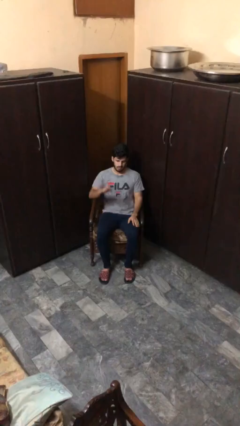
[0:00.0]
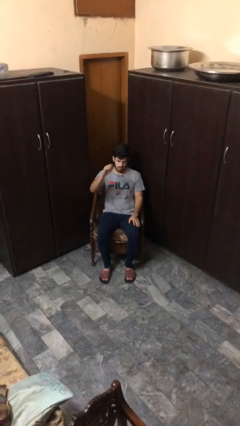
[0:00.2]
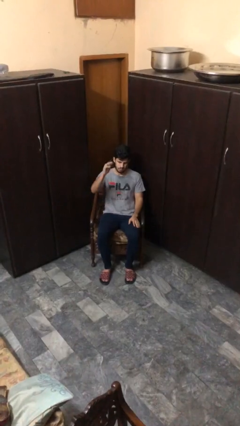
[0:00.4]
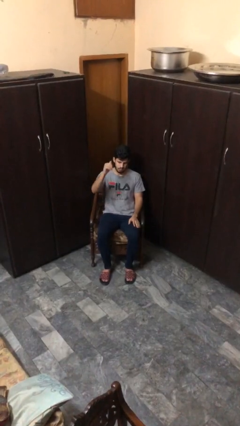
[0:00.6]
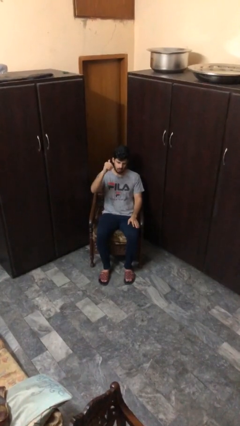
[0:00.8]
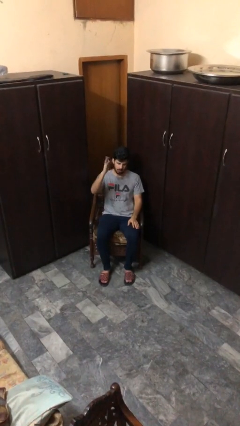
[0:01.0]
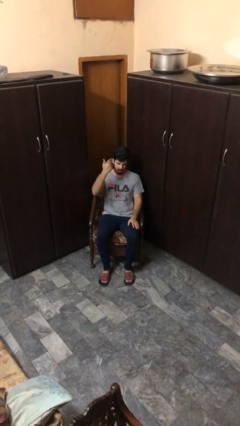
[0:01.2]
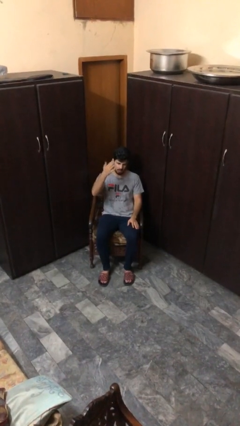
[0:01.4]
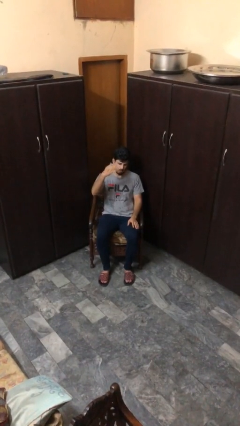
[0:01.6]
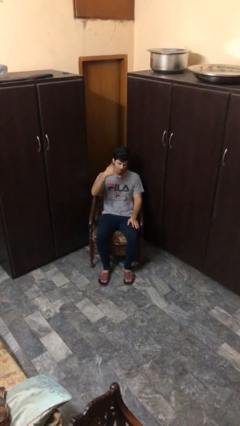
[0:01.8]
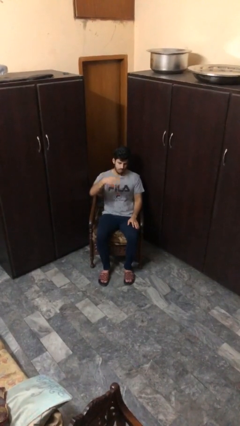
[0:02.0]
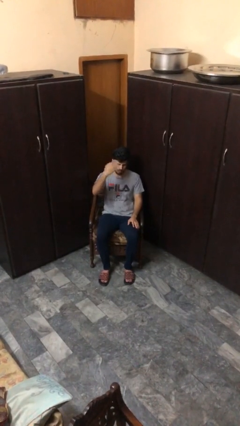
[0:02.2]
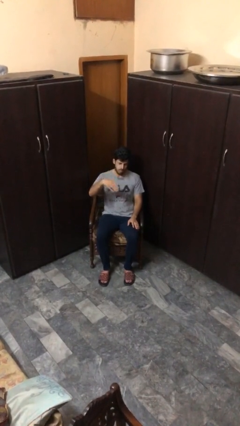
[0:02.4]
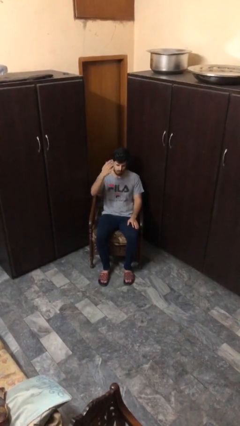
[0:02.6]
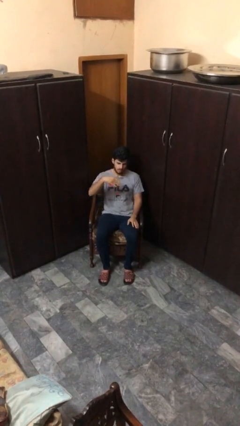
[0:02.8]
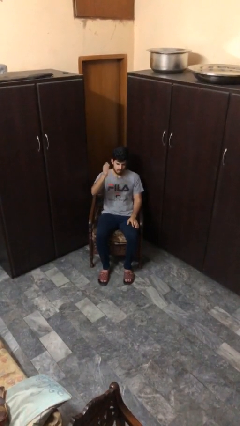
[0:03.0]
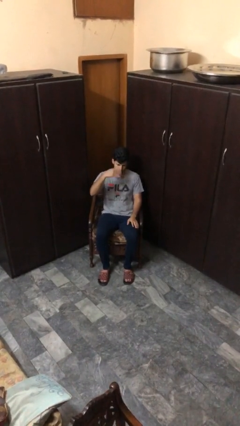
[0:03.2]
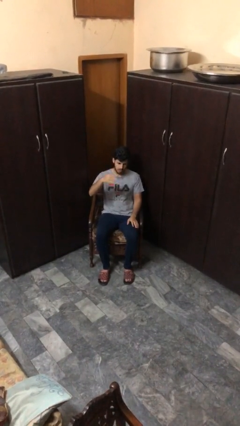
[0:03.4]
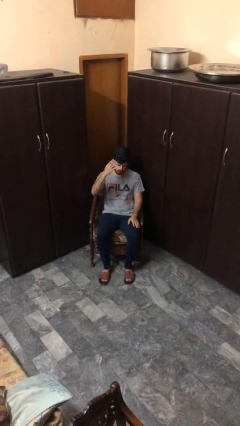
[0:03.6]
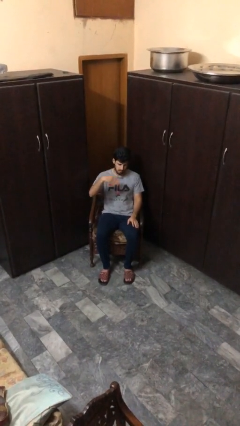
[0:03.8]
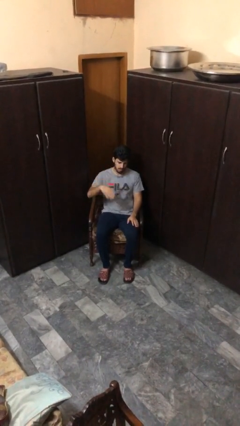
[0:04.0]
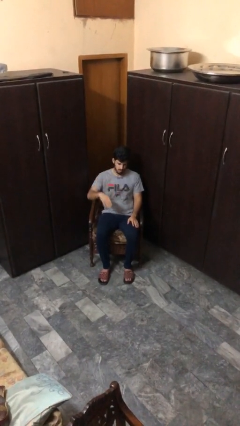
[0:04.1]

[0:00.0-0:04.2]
person gestures come here

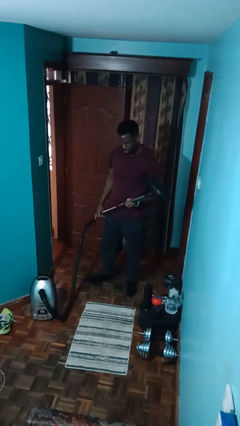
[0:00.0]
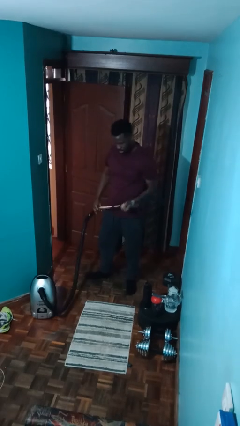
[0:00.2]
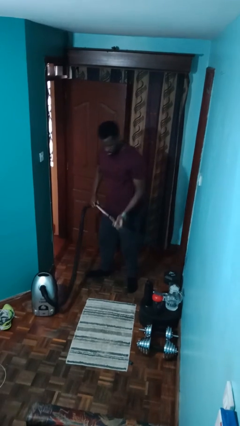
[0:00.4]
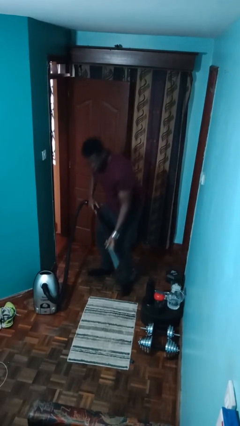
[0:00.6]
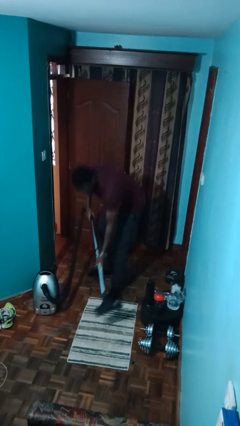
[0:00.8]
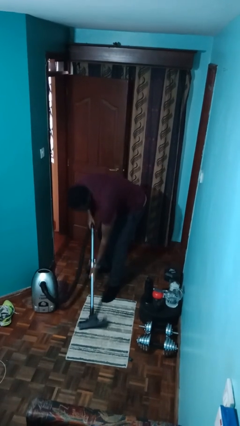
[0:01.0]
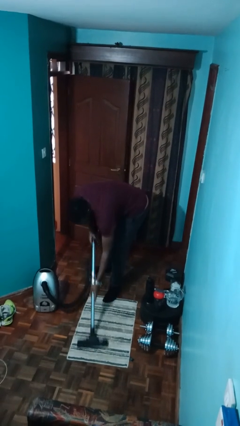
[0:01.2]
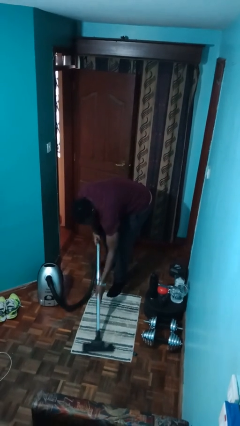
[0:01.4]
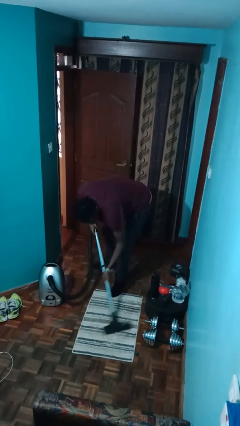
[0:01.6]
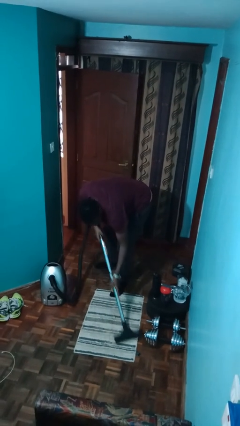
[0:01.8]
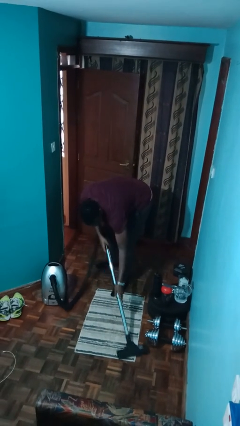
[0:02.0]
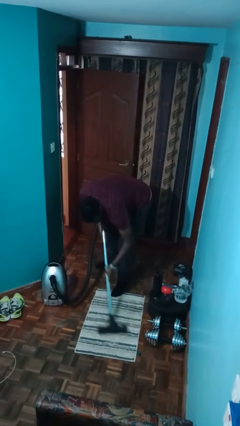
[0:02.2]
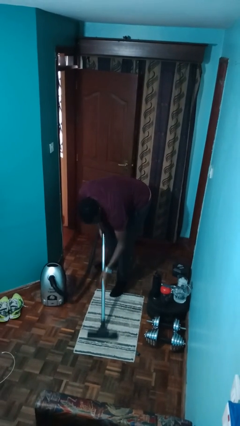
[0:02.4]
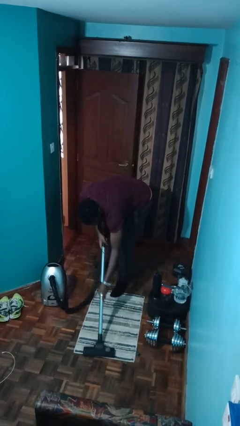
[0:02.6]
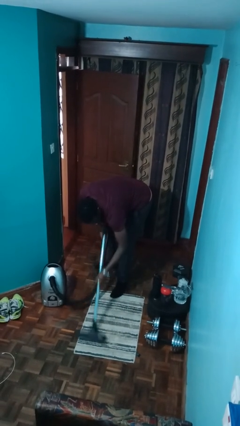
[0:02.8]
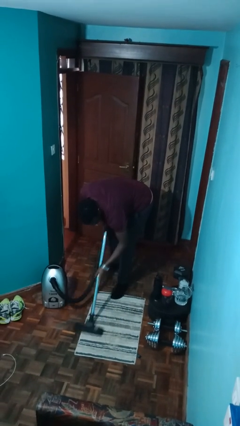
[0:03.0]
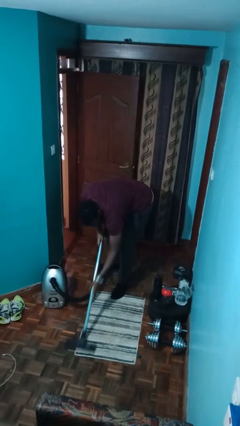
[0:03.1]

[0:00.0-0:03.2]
person vacuums carpet

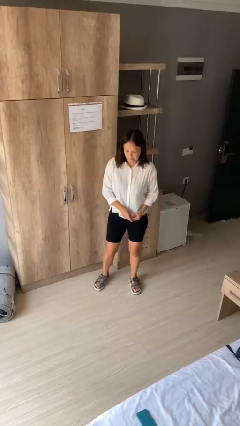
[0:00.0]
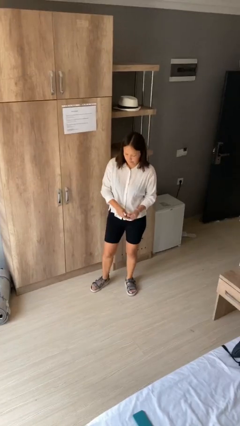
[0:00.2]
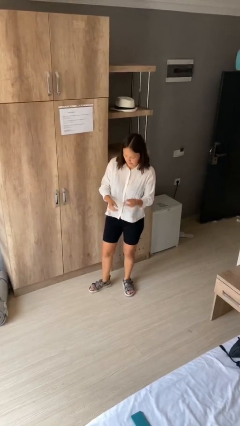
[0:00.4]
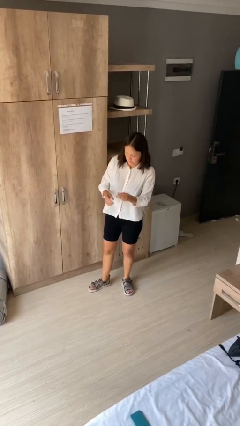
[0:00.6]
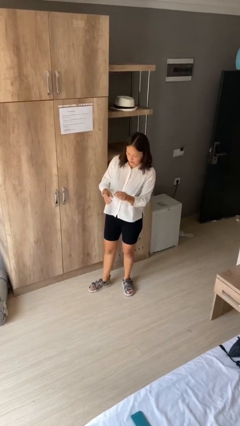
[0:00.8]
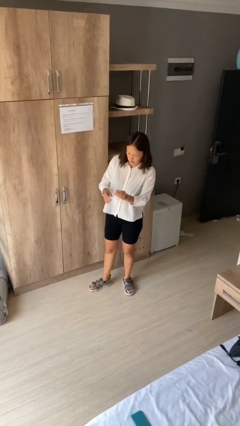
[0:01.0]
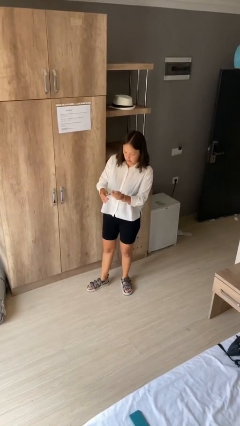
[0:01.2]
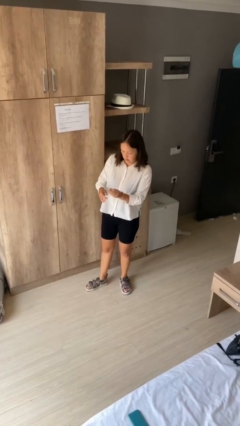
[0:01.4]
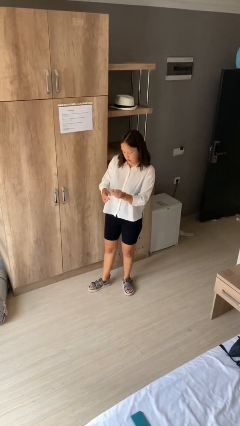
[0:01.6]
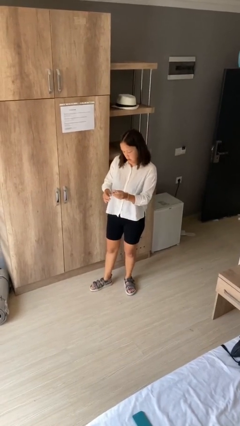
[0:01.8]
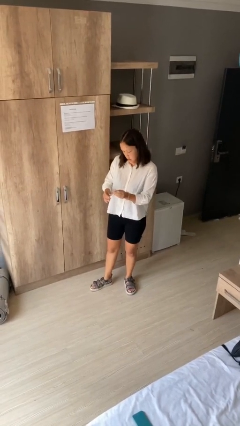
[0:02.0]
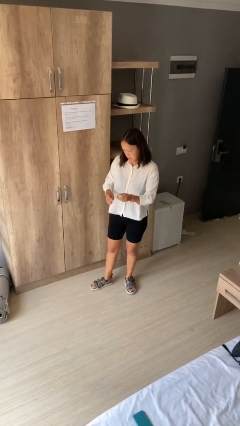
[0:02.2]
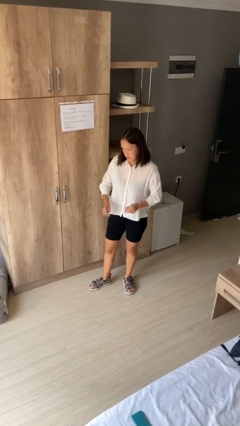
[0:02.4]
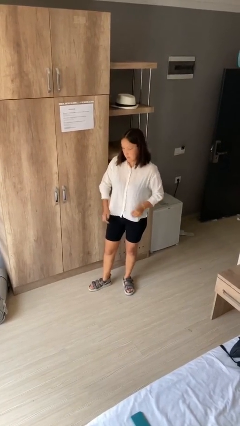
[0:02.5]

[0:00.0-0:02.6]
person clips fingernails

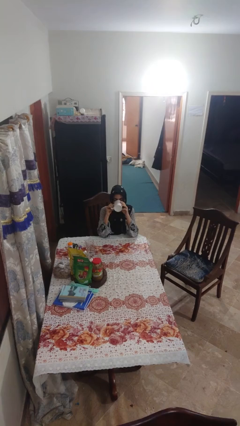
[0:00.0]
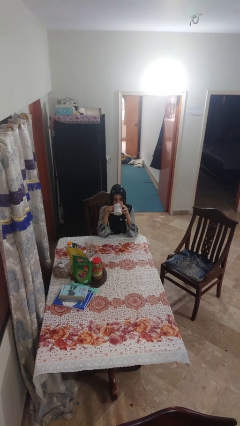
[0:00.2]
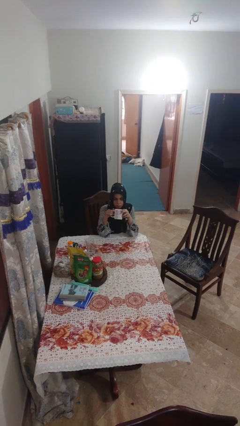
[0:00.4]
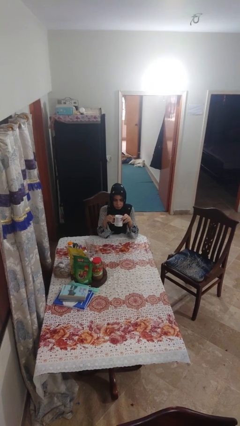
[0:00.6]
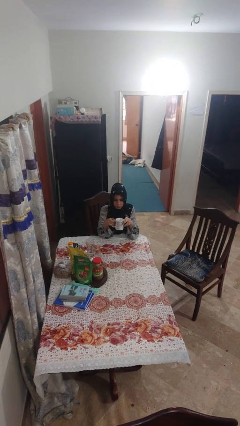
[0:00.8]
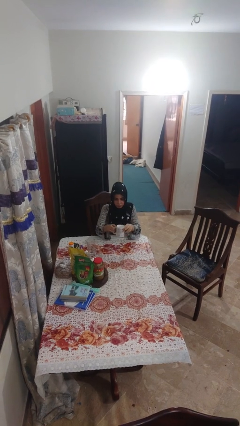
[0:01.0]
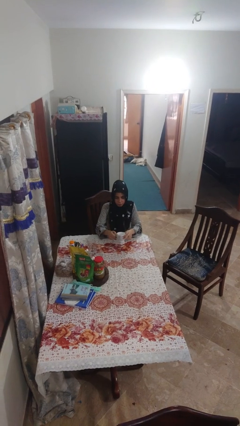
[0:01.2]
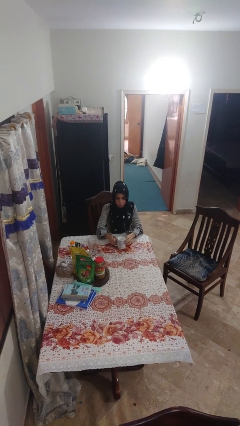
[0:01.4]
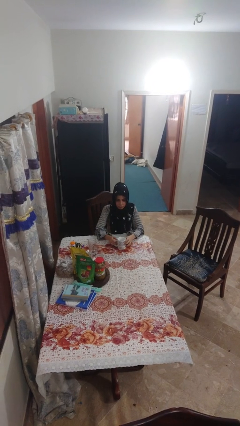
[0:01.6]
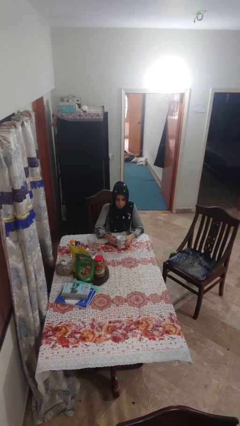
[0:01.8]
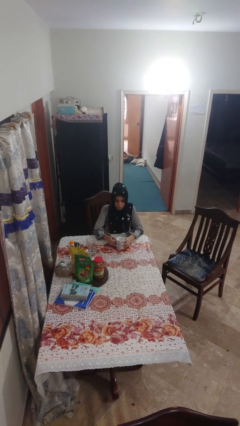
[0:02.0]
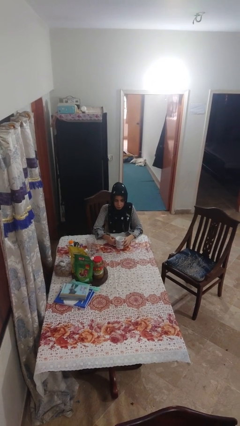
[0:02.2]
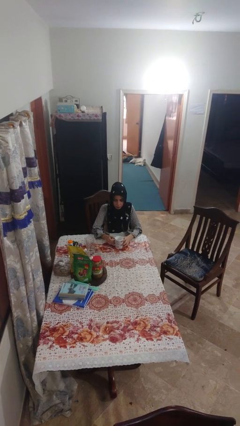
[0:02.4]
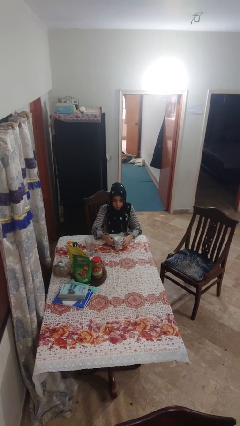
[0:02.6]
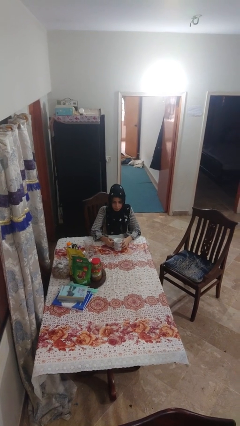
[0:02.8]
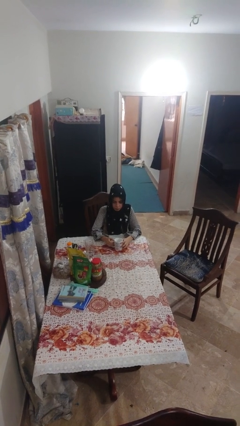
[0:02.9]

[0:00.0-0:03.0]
person puts down object on table

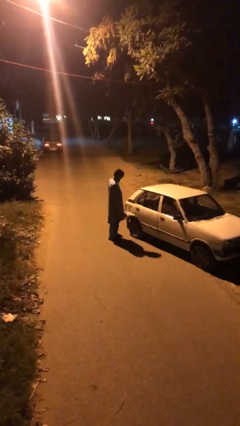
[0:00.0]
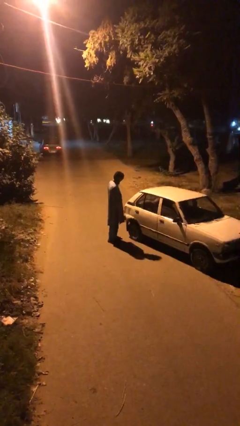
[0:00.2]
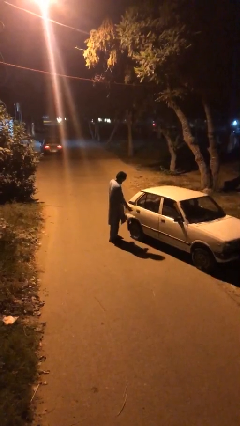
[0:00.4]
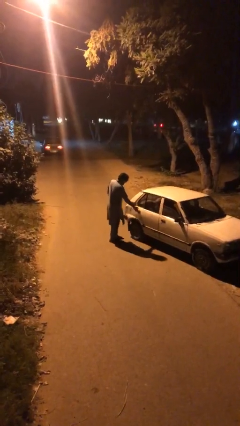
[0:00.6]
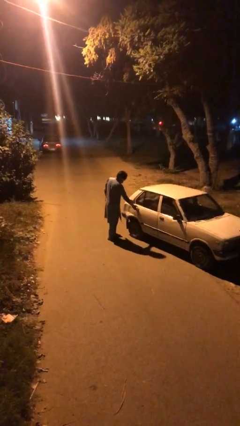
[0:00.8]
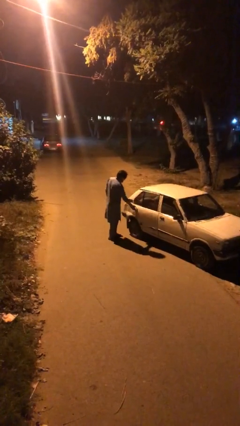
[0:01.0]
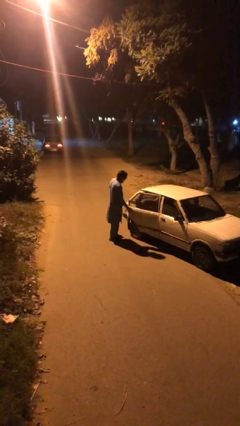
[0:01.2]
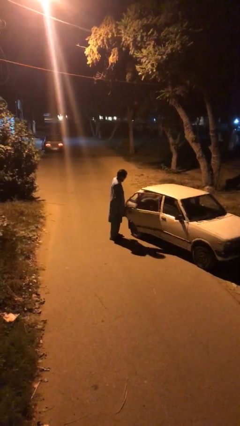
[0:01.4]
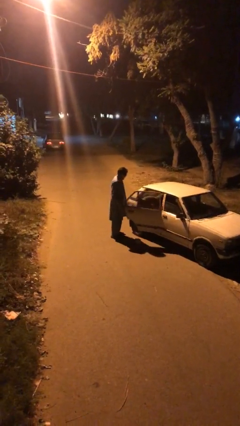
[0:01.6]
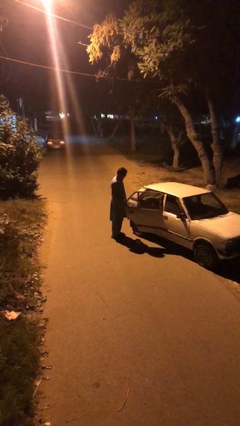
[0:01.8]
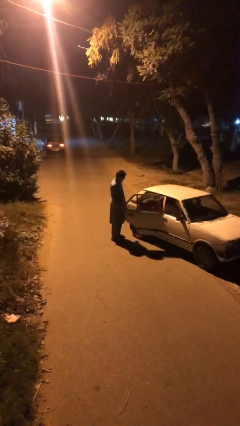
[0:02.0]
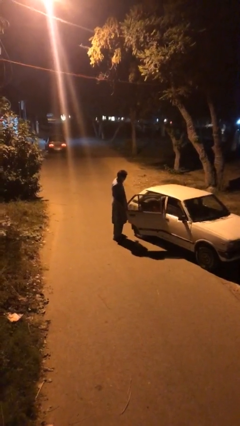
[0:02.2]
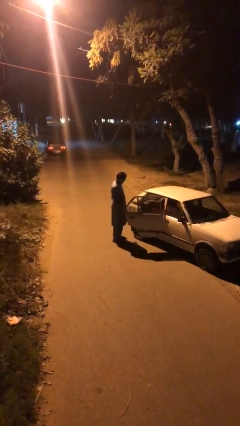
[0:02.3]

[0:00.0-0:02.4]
person opens car door

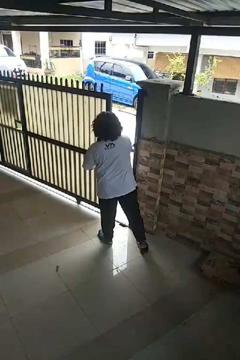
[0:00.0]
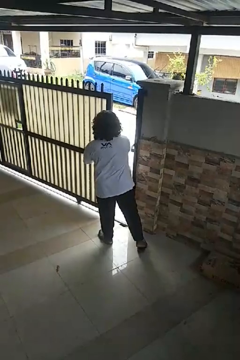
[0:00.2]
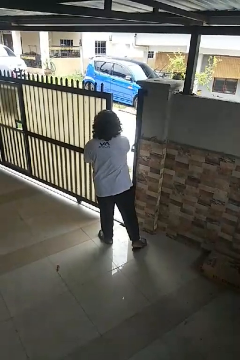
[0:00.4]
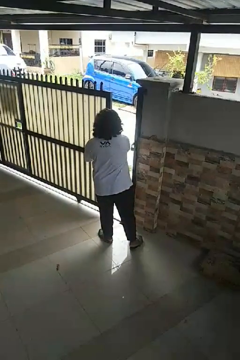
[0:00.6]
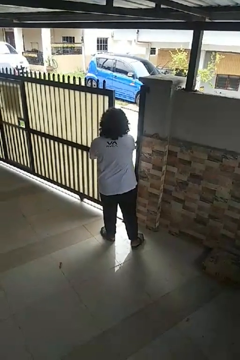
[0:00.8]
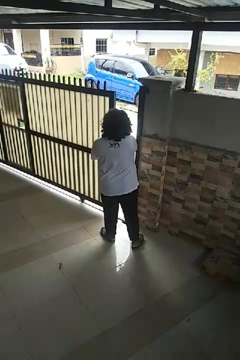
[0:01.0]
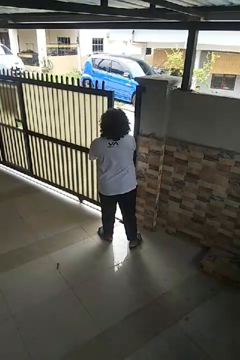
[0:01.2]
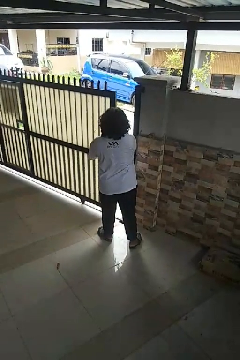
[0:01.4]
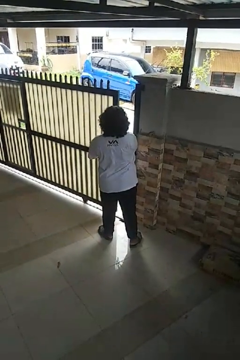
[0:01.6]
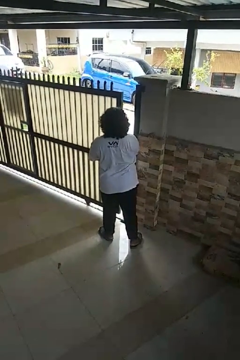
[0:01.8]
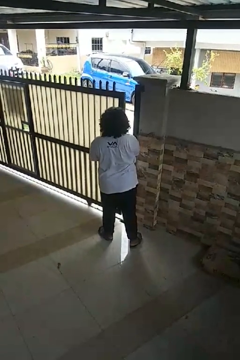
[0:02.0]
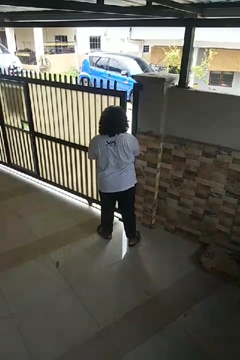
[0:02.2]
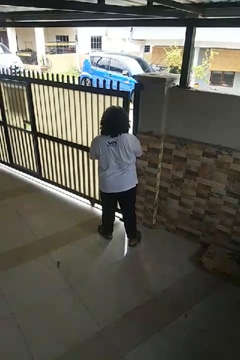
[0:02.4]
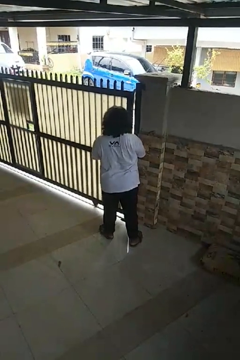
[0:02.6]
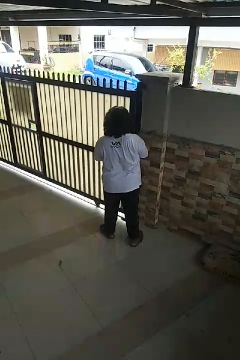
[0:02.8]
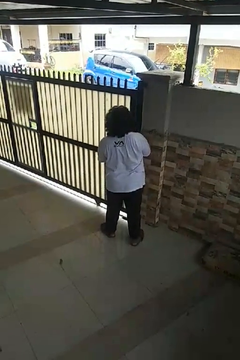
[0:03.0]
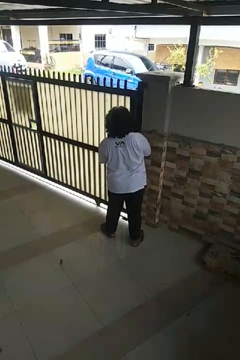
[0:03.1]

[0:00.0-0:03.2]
person closes sliding door
